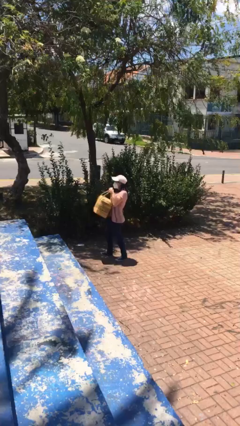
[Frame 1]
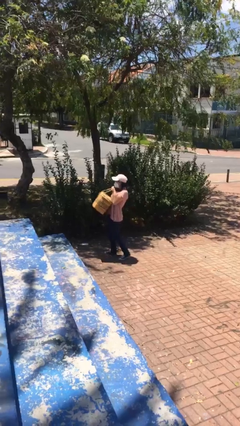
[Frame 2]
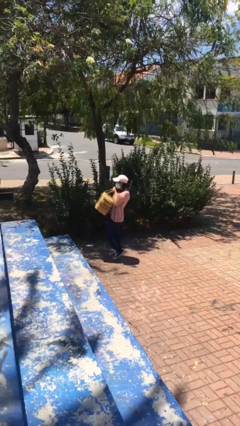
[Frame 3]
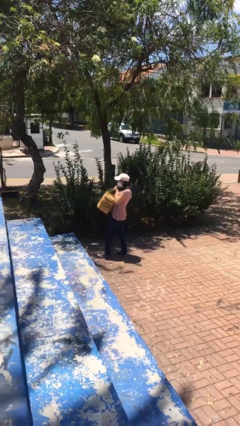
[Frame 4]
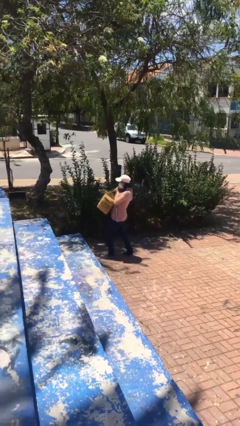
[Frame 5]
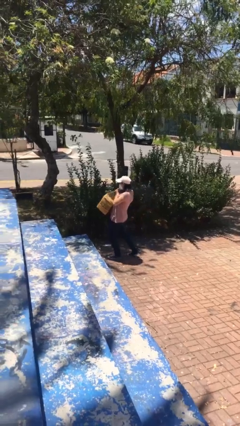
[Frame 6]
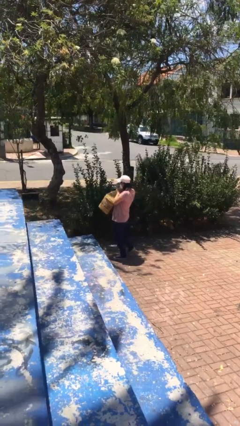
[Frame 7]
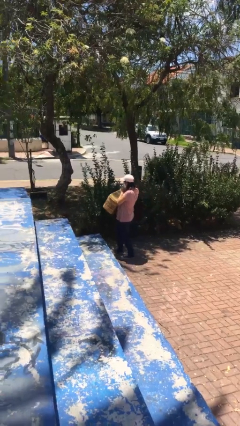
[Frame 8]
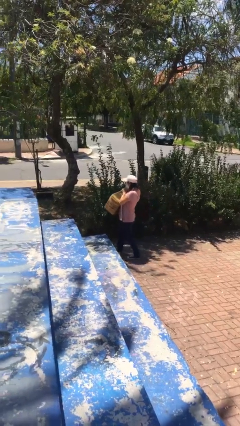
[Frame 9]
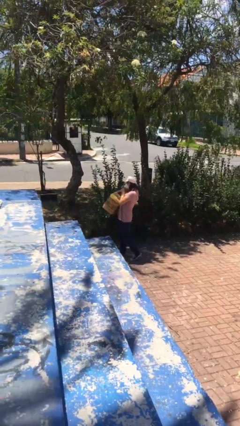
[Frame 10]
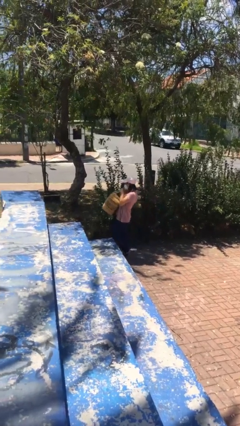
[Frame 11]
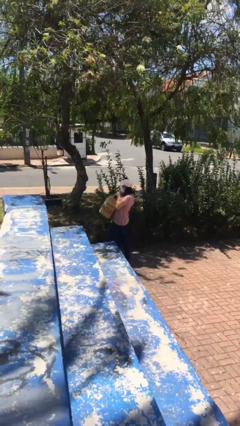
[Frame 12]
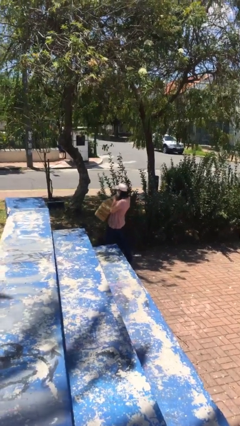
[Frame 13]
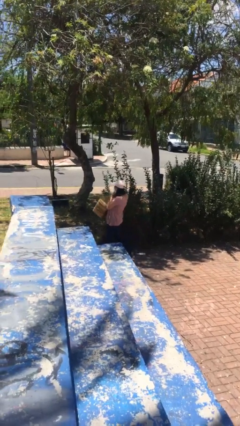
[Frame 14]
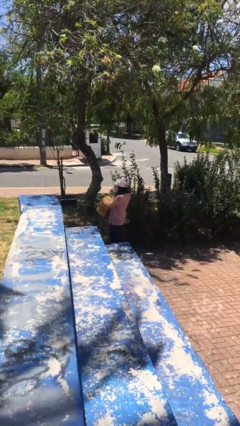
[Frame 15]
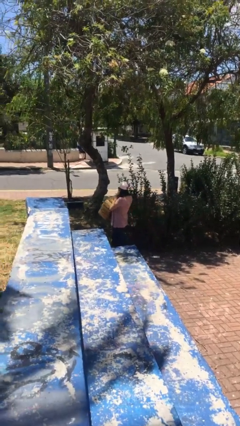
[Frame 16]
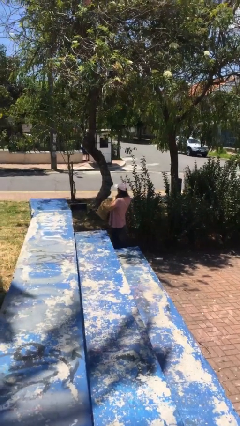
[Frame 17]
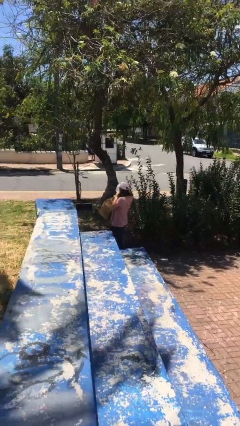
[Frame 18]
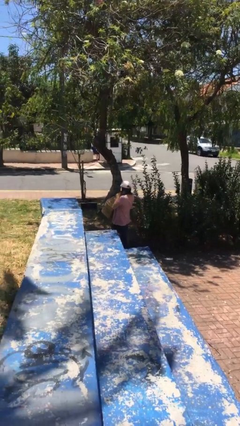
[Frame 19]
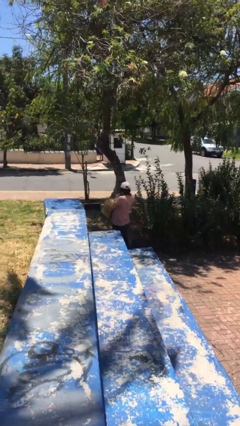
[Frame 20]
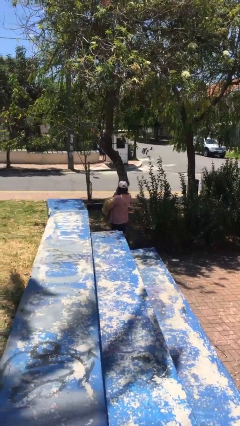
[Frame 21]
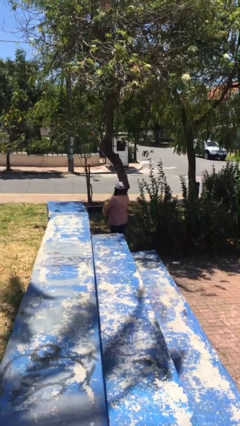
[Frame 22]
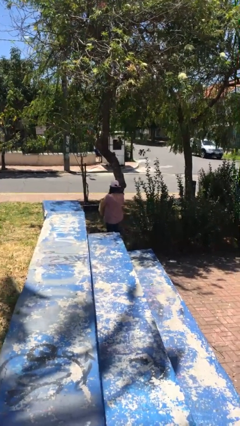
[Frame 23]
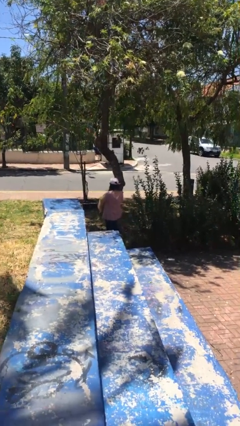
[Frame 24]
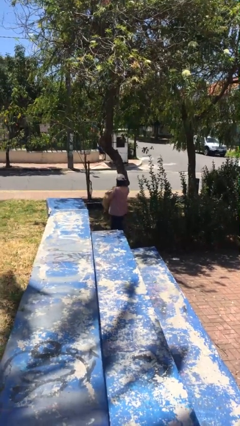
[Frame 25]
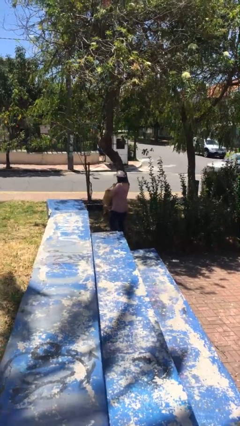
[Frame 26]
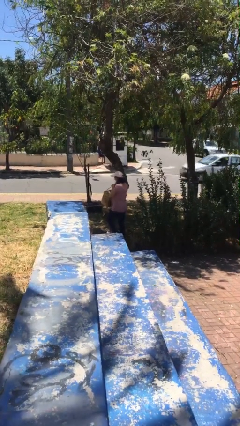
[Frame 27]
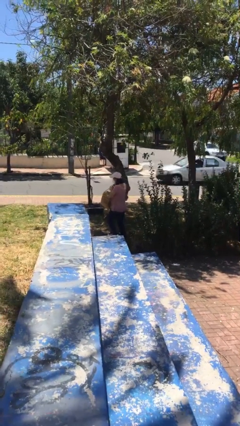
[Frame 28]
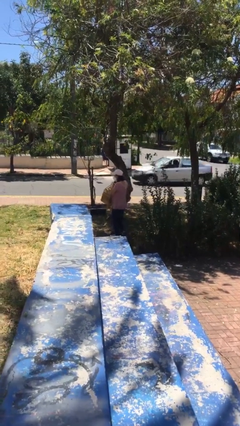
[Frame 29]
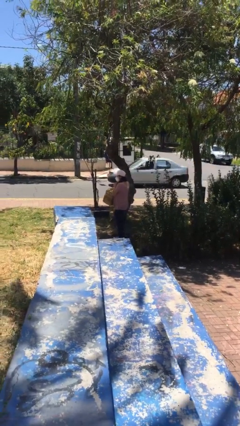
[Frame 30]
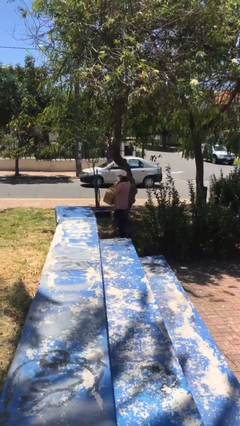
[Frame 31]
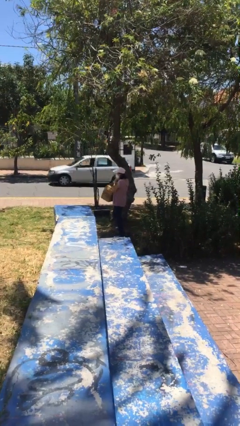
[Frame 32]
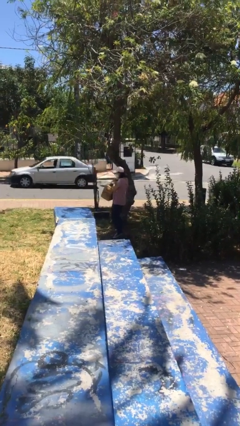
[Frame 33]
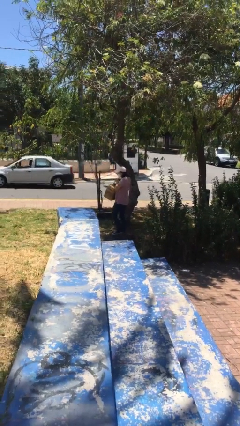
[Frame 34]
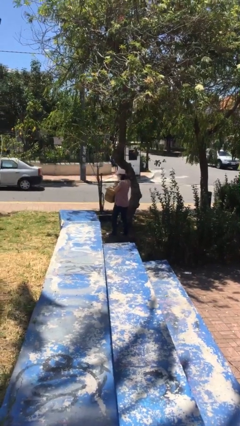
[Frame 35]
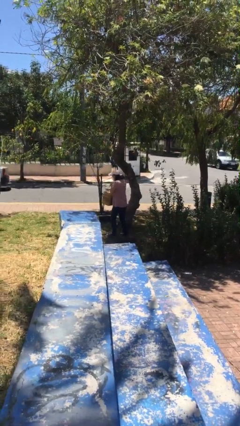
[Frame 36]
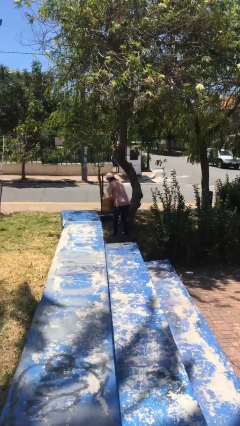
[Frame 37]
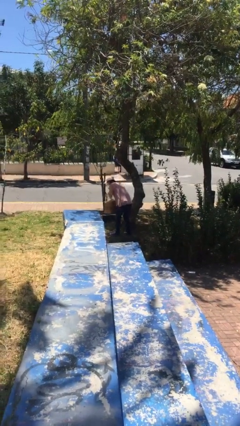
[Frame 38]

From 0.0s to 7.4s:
person carries heavy object

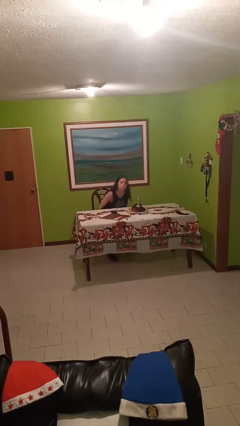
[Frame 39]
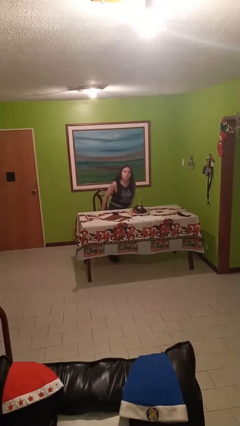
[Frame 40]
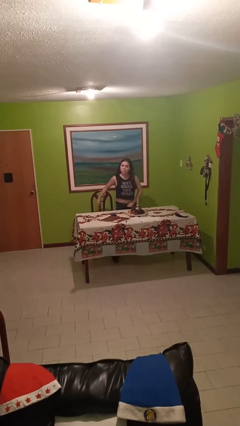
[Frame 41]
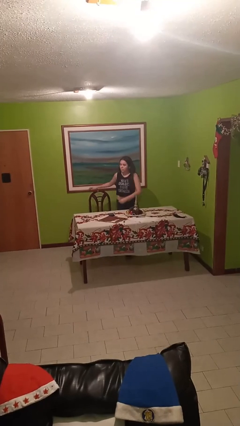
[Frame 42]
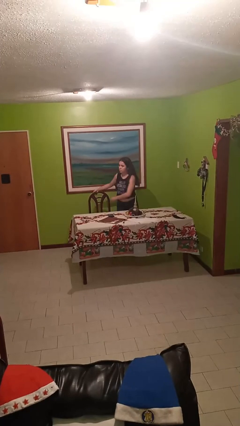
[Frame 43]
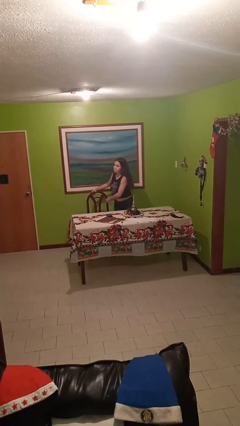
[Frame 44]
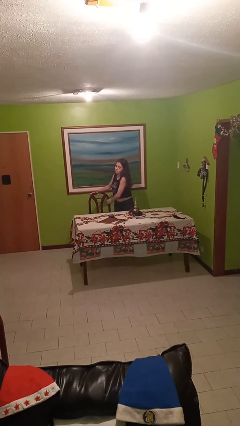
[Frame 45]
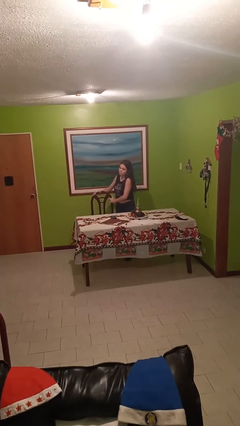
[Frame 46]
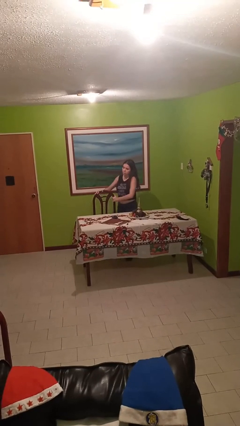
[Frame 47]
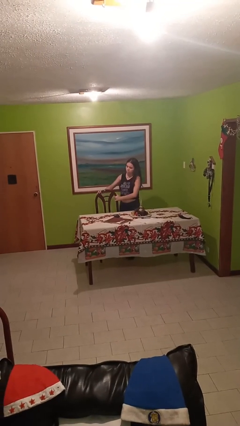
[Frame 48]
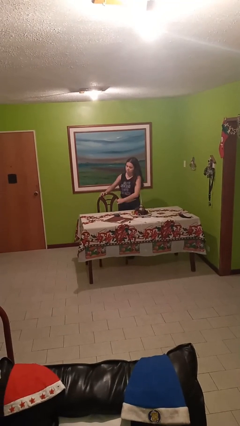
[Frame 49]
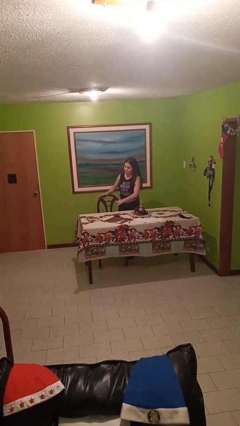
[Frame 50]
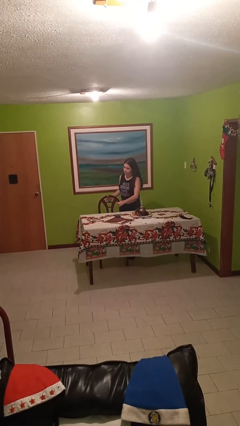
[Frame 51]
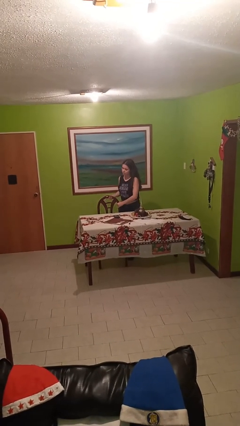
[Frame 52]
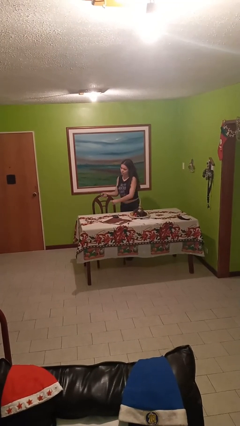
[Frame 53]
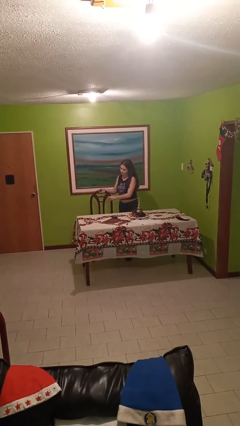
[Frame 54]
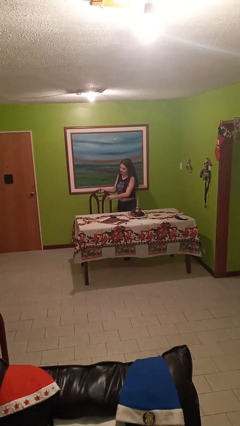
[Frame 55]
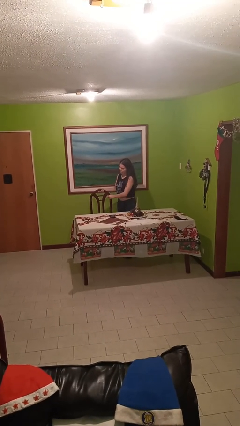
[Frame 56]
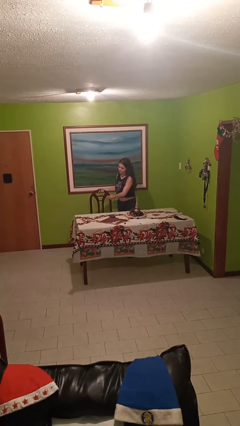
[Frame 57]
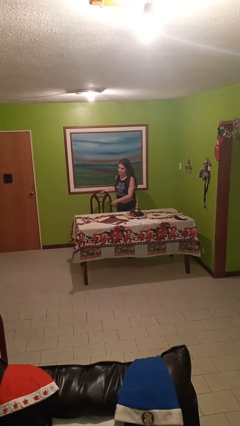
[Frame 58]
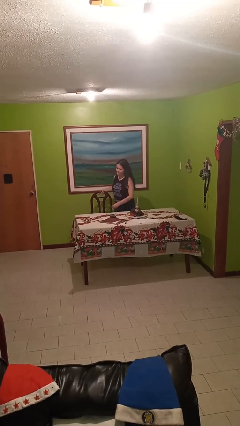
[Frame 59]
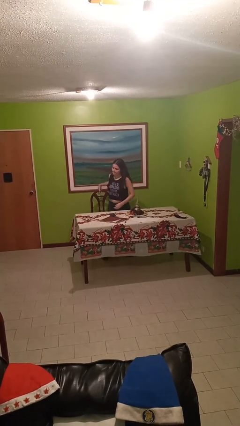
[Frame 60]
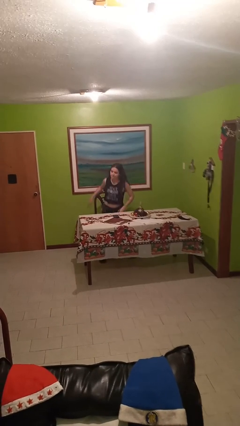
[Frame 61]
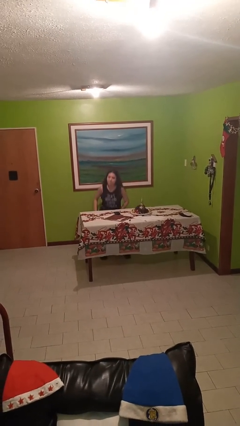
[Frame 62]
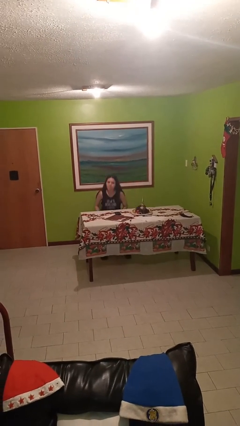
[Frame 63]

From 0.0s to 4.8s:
person stands up

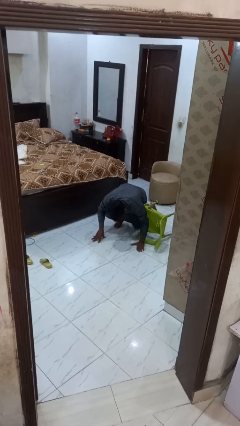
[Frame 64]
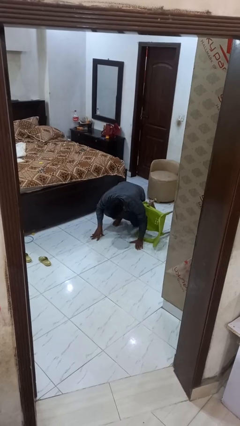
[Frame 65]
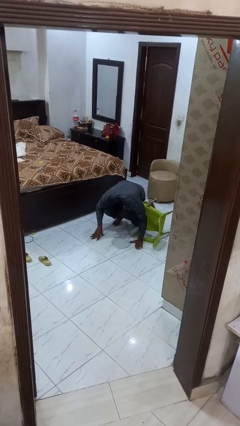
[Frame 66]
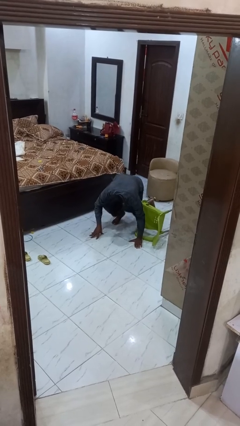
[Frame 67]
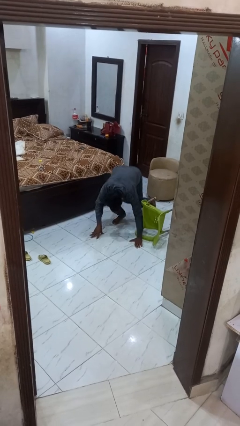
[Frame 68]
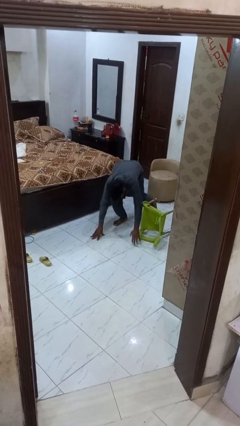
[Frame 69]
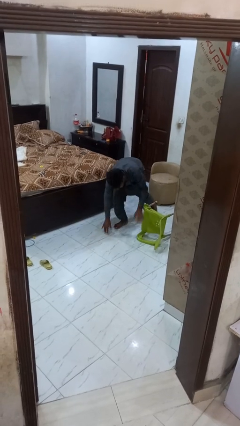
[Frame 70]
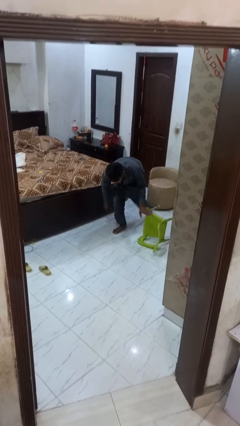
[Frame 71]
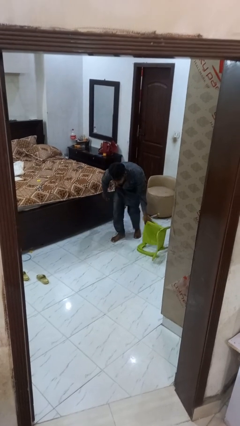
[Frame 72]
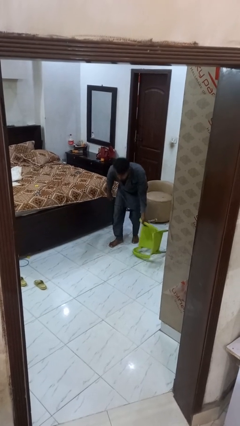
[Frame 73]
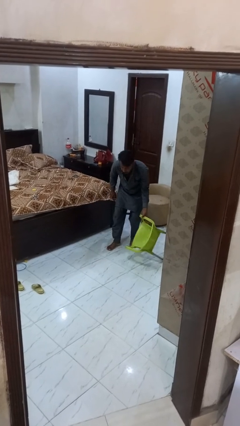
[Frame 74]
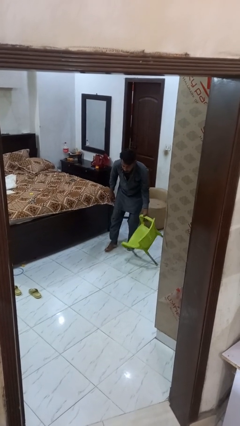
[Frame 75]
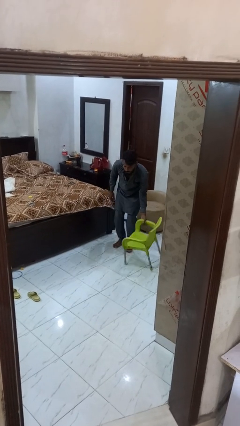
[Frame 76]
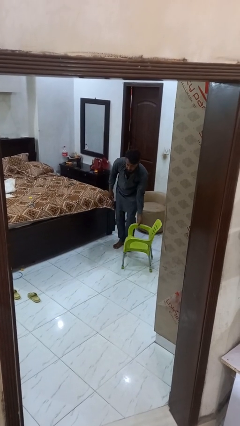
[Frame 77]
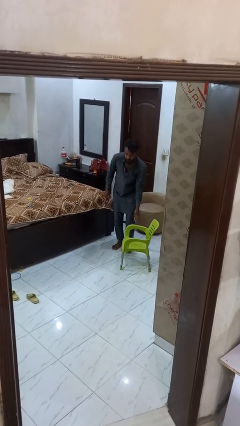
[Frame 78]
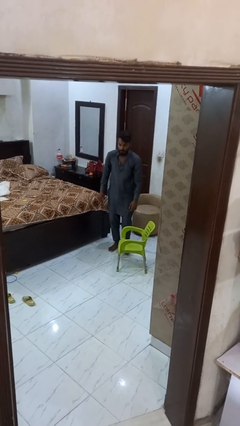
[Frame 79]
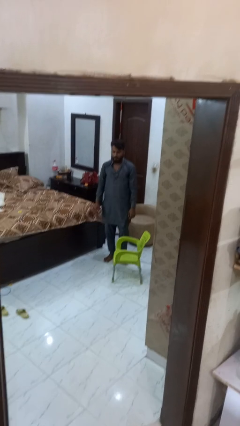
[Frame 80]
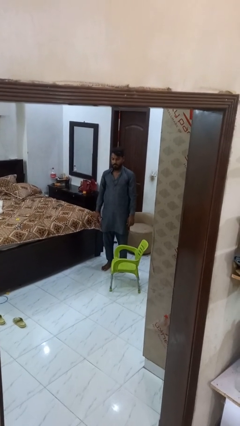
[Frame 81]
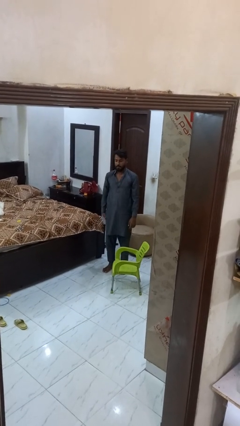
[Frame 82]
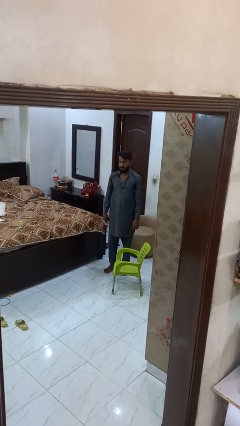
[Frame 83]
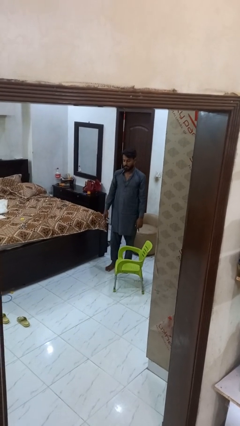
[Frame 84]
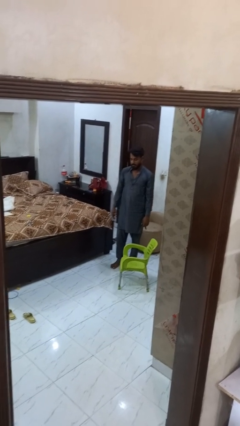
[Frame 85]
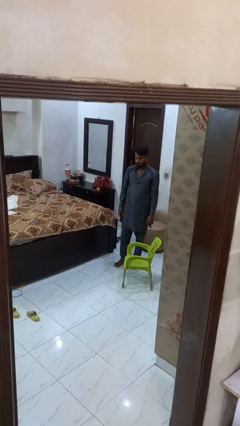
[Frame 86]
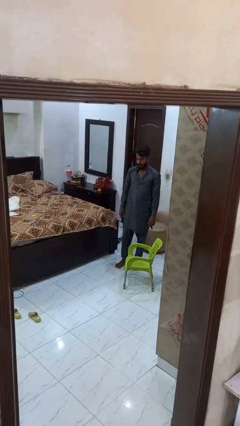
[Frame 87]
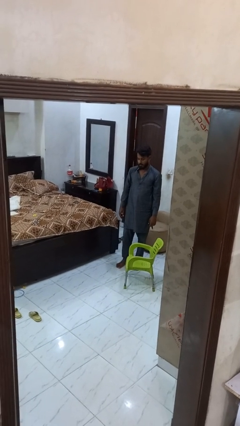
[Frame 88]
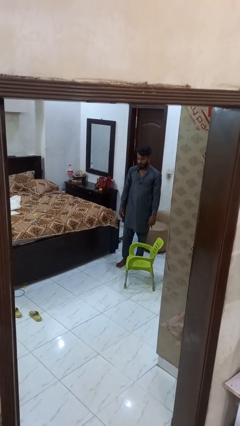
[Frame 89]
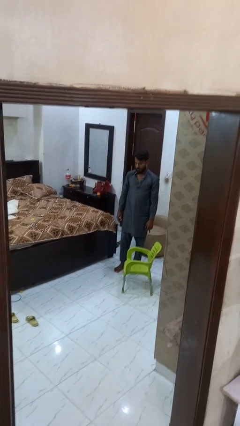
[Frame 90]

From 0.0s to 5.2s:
person stands up from floor

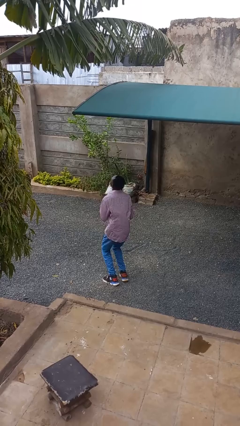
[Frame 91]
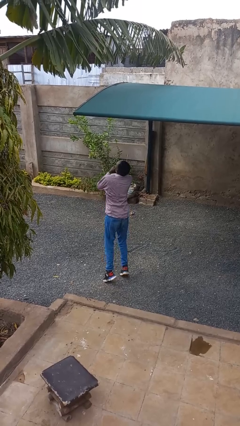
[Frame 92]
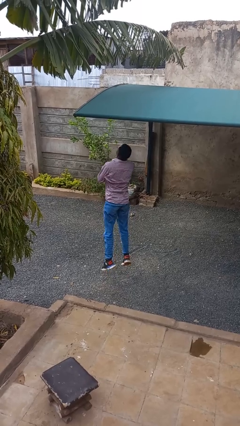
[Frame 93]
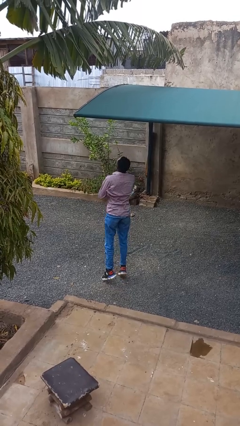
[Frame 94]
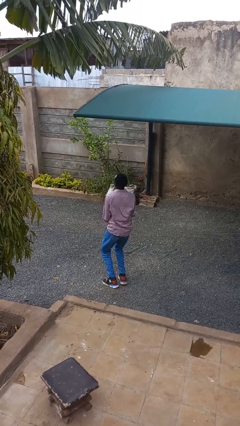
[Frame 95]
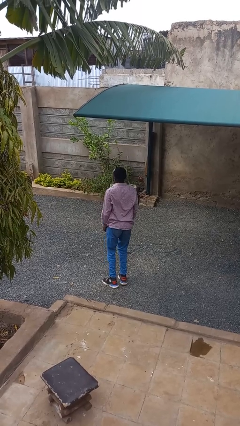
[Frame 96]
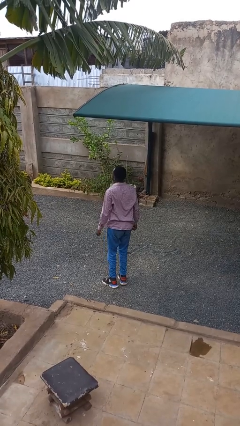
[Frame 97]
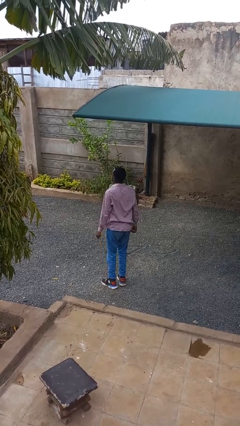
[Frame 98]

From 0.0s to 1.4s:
person jumps
